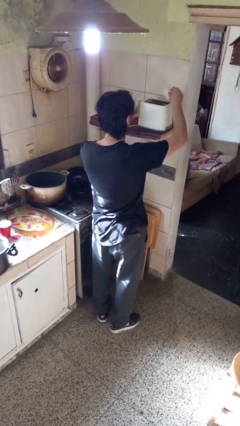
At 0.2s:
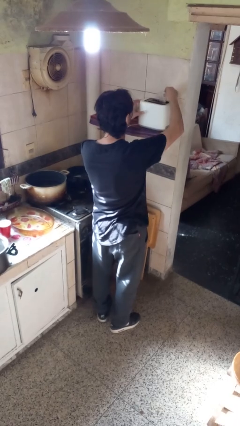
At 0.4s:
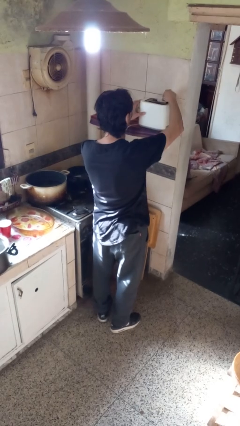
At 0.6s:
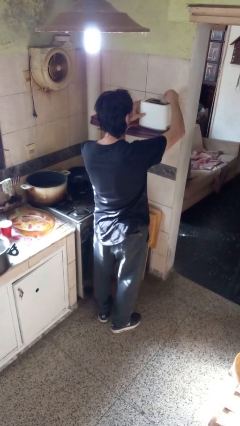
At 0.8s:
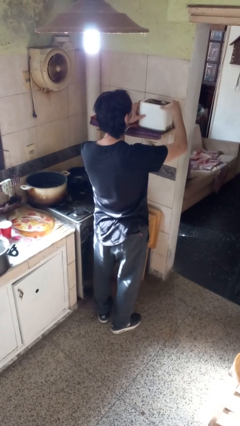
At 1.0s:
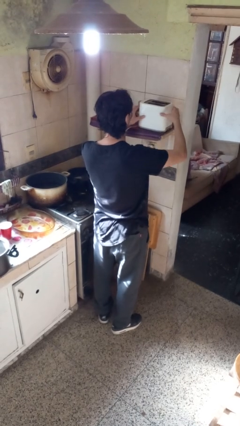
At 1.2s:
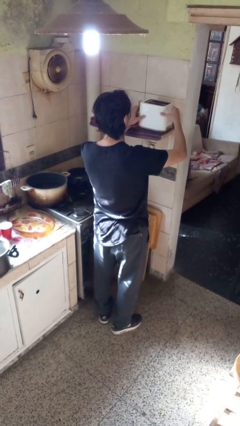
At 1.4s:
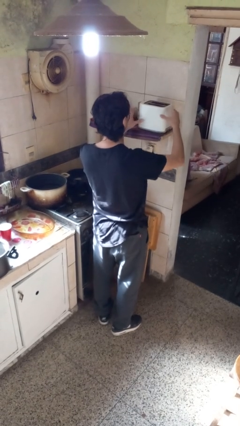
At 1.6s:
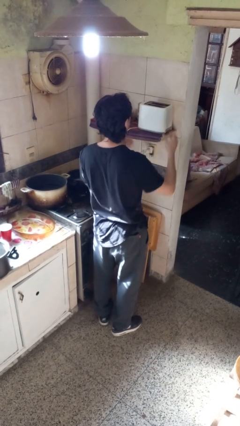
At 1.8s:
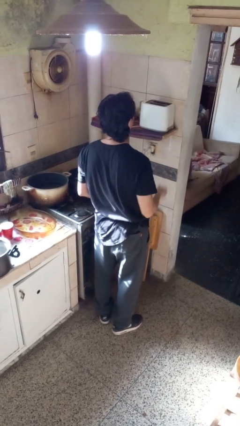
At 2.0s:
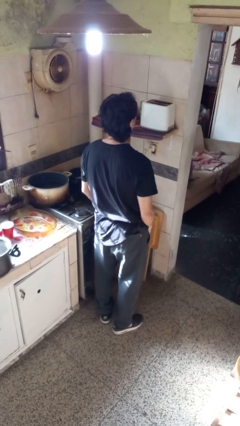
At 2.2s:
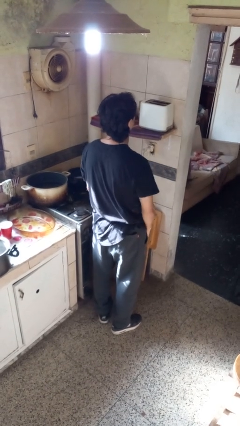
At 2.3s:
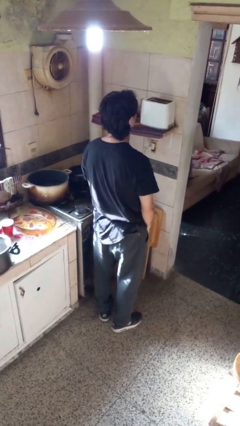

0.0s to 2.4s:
person puts object into toaster

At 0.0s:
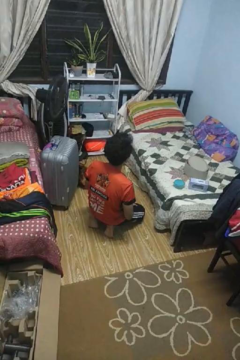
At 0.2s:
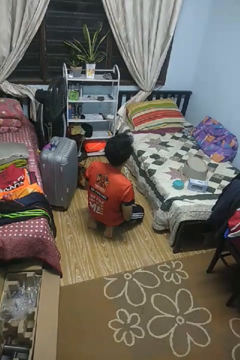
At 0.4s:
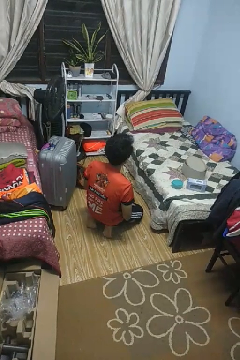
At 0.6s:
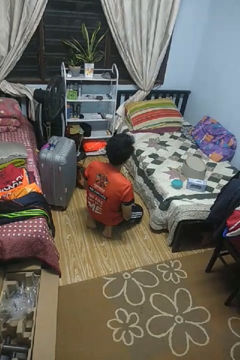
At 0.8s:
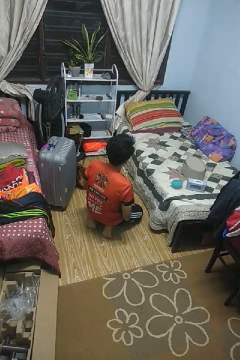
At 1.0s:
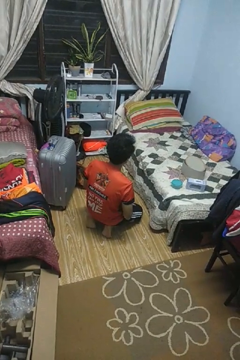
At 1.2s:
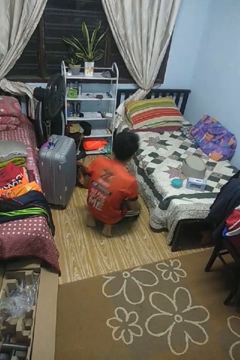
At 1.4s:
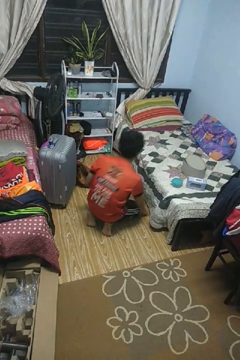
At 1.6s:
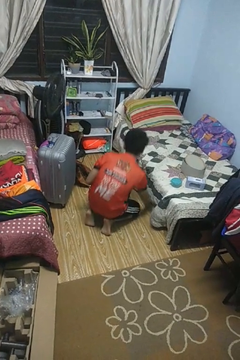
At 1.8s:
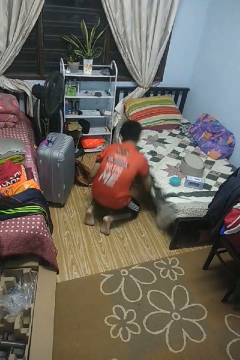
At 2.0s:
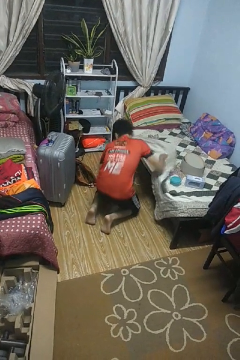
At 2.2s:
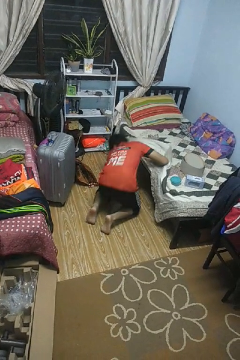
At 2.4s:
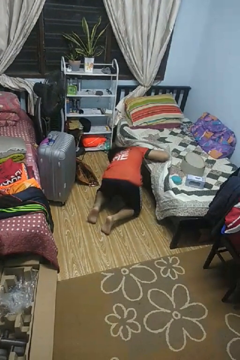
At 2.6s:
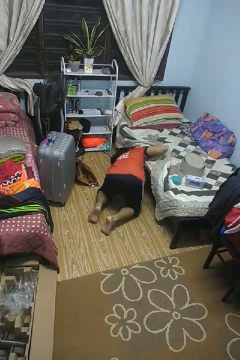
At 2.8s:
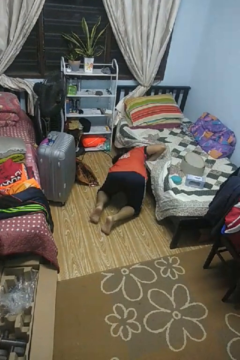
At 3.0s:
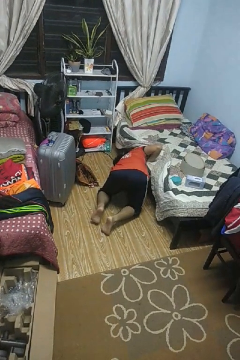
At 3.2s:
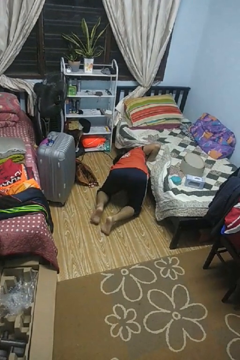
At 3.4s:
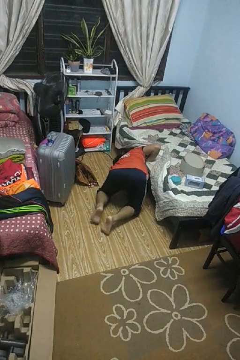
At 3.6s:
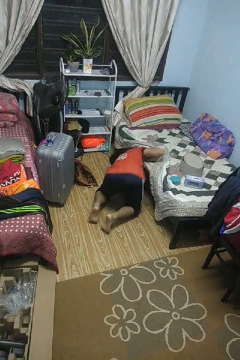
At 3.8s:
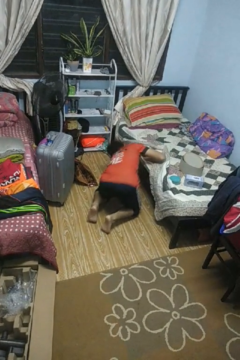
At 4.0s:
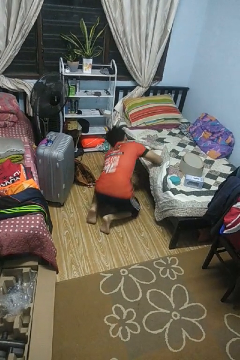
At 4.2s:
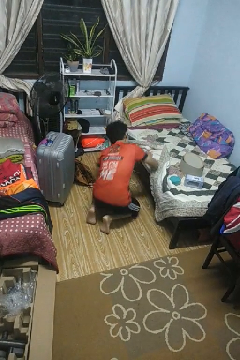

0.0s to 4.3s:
person searches under bed

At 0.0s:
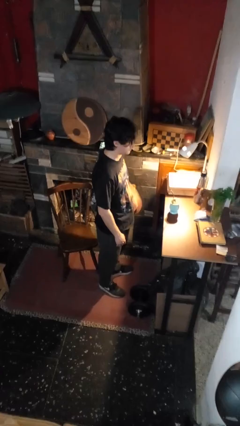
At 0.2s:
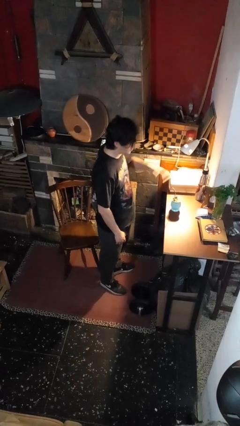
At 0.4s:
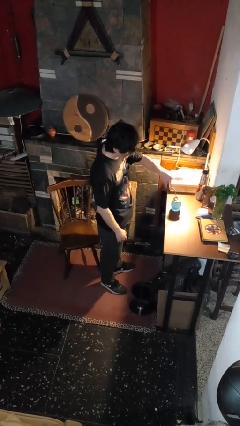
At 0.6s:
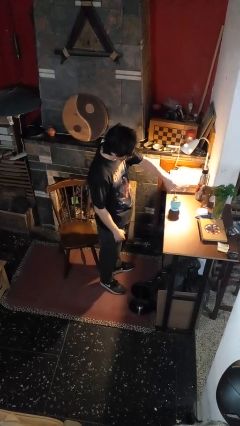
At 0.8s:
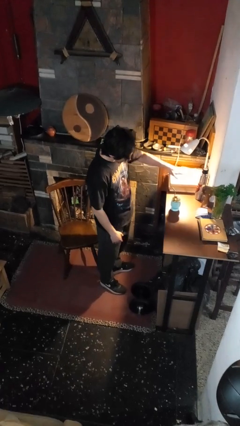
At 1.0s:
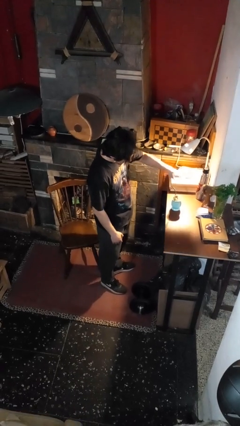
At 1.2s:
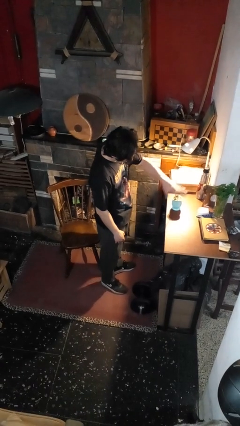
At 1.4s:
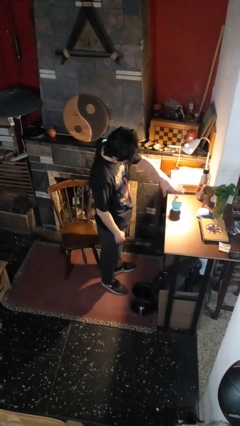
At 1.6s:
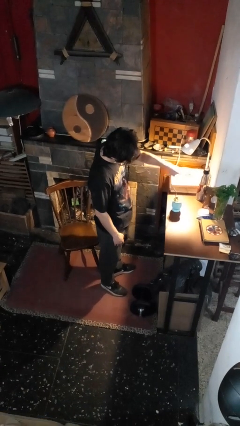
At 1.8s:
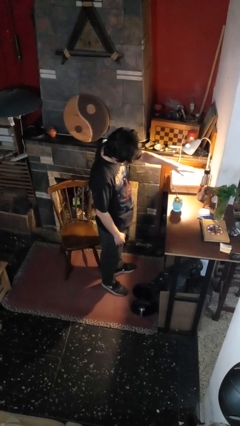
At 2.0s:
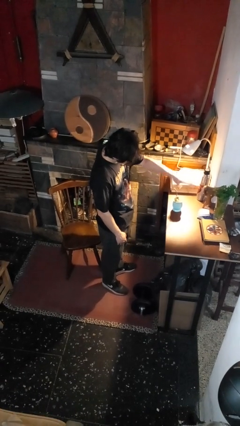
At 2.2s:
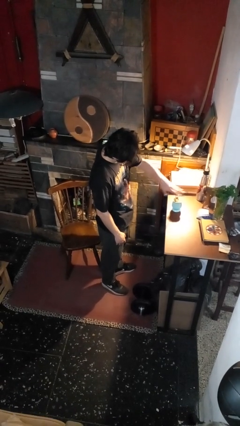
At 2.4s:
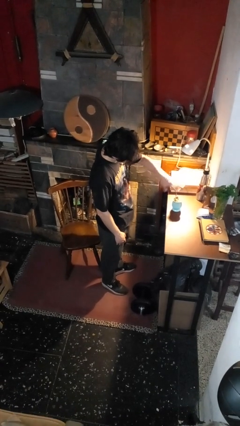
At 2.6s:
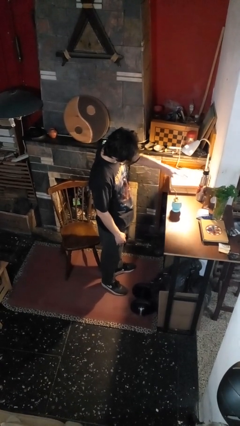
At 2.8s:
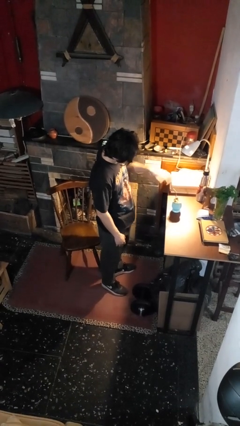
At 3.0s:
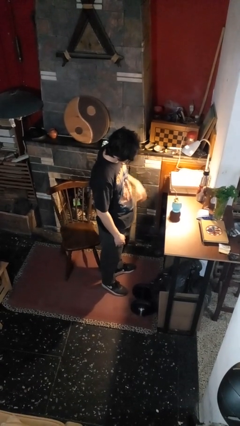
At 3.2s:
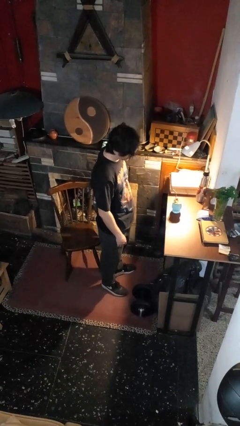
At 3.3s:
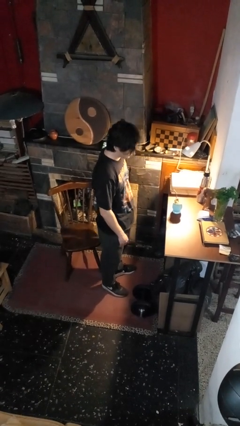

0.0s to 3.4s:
person waves hand over object

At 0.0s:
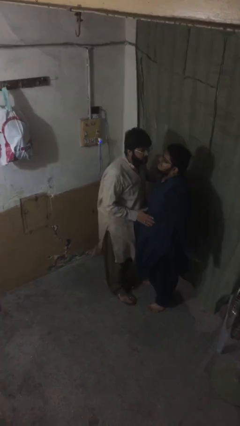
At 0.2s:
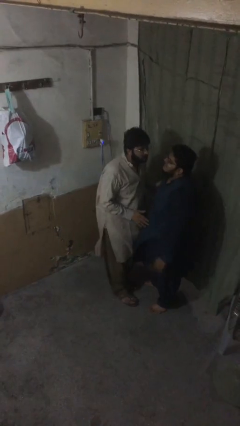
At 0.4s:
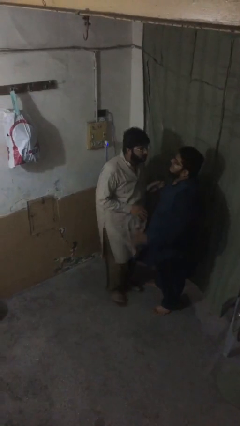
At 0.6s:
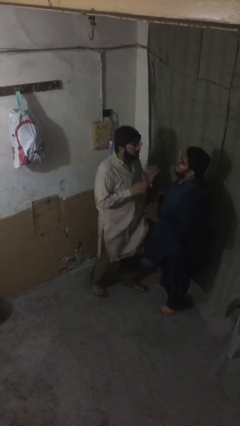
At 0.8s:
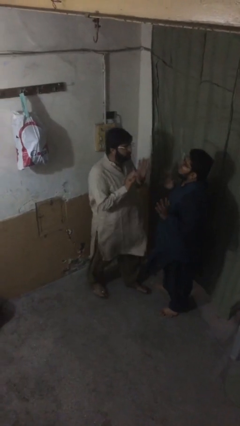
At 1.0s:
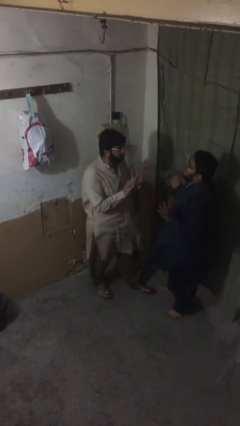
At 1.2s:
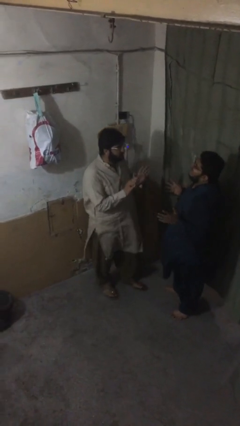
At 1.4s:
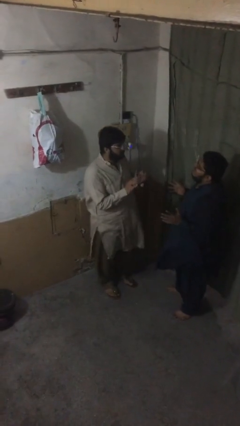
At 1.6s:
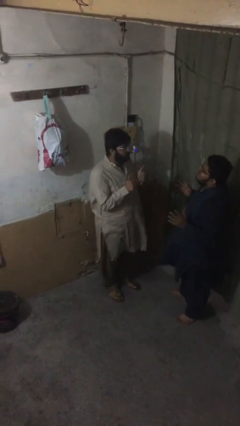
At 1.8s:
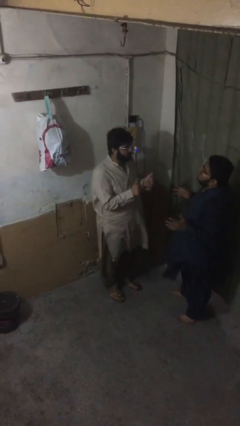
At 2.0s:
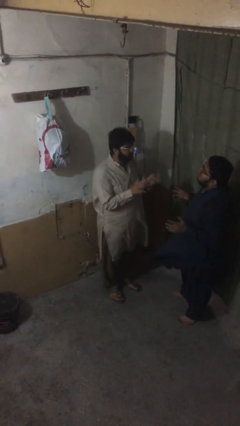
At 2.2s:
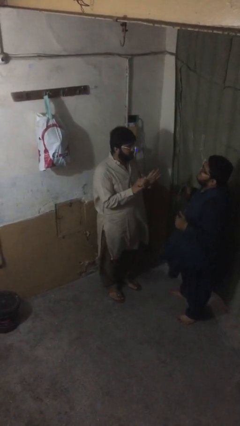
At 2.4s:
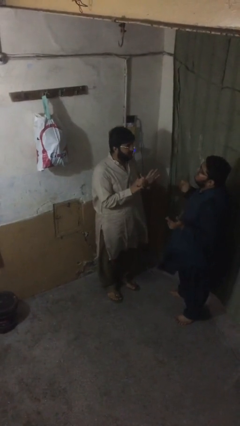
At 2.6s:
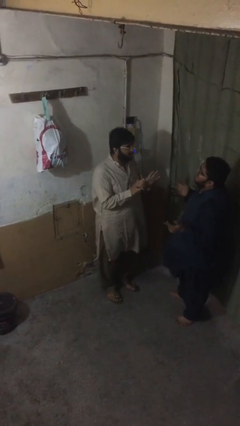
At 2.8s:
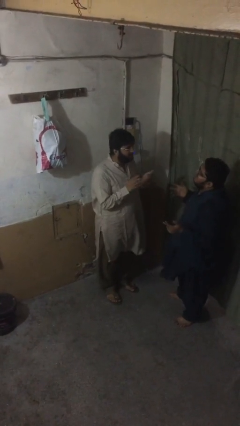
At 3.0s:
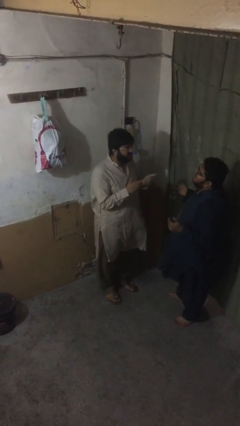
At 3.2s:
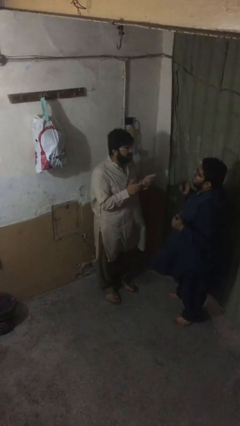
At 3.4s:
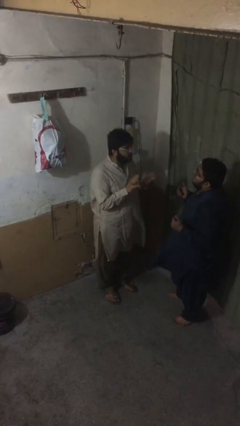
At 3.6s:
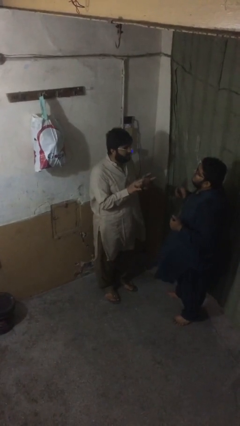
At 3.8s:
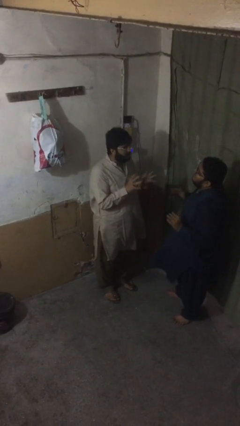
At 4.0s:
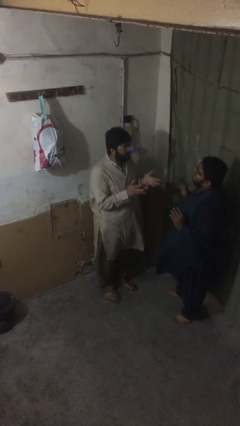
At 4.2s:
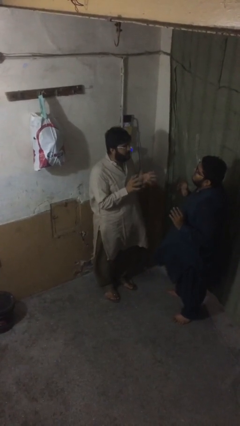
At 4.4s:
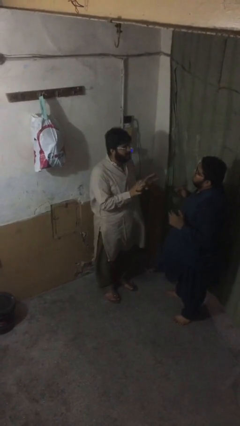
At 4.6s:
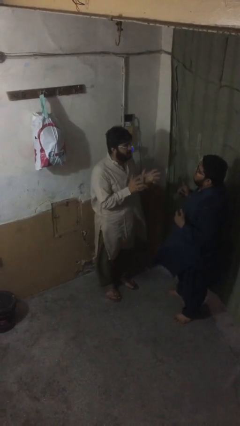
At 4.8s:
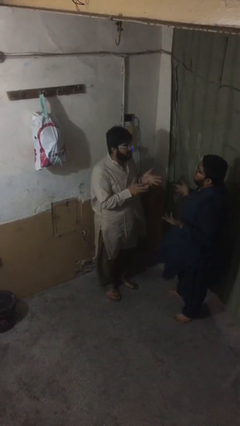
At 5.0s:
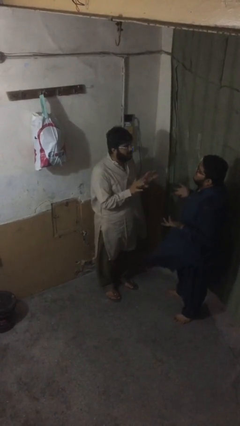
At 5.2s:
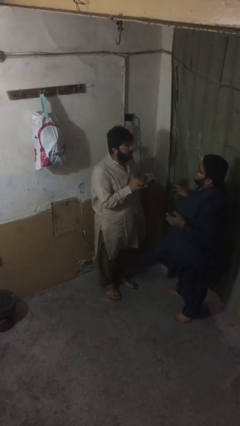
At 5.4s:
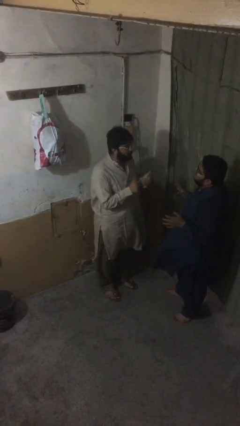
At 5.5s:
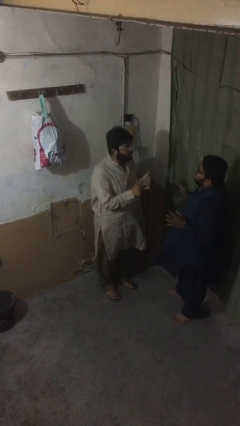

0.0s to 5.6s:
person talks to person

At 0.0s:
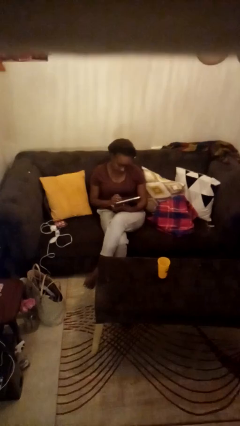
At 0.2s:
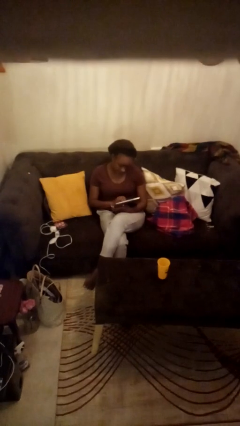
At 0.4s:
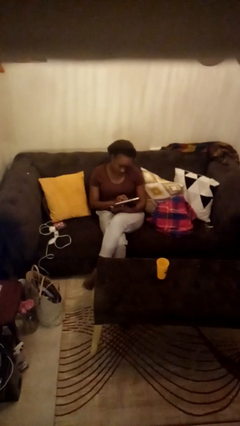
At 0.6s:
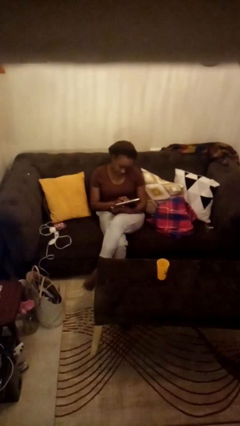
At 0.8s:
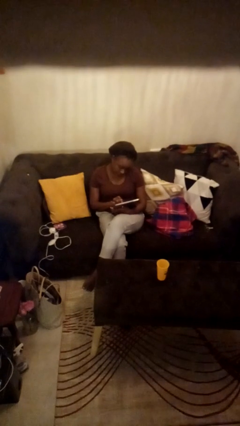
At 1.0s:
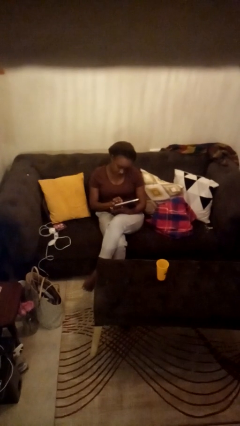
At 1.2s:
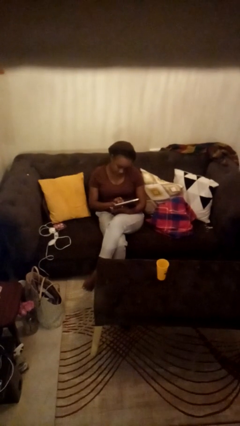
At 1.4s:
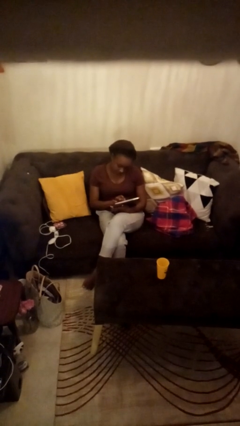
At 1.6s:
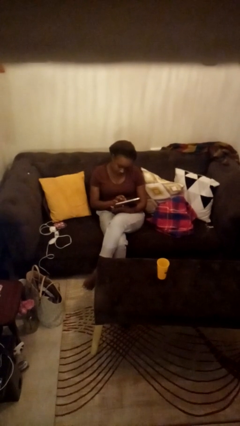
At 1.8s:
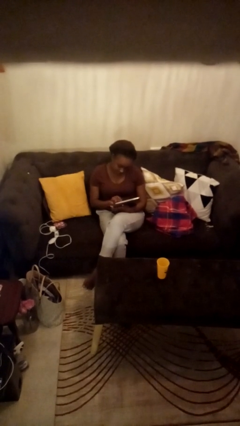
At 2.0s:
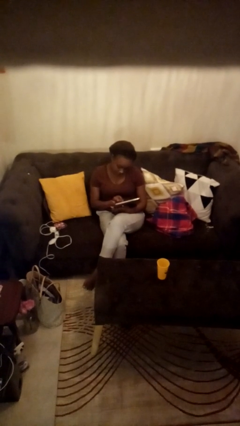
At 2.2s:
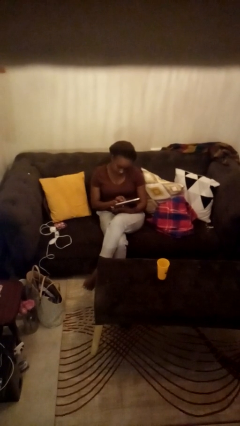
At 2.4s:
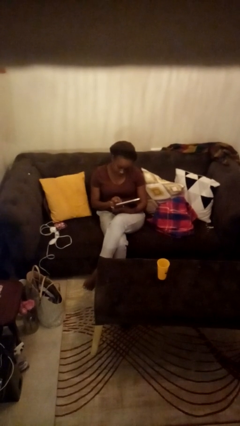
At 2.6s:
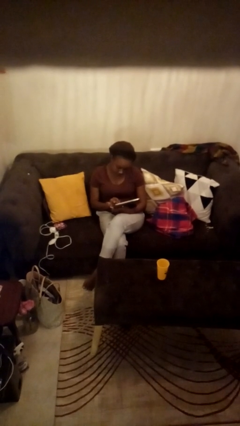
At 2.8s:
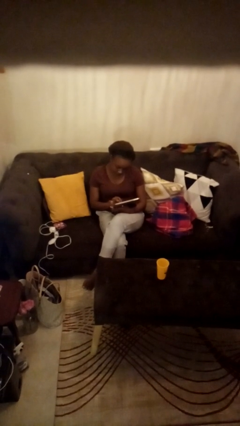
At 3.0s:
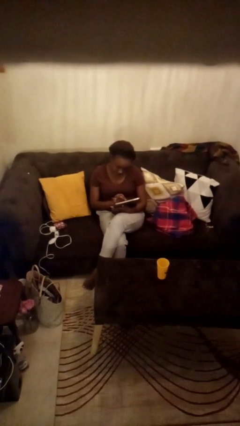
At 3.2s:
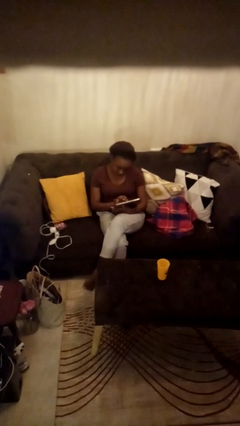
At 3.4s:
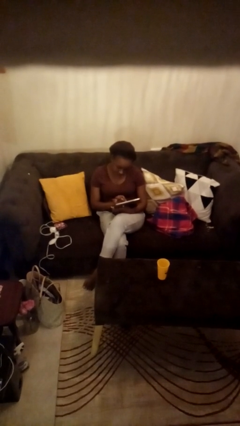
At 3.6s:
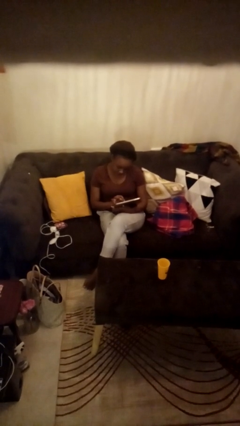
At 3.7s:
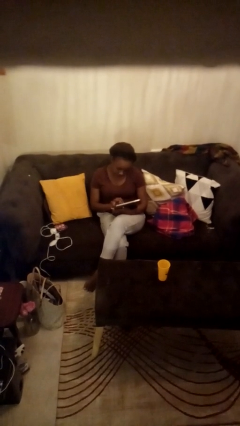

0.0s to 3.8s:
person interacts with tablet
